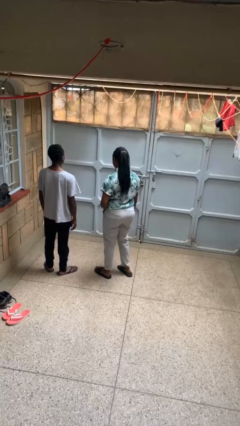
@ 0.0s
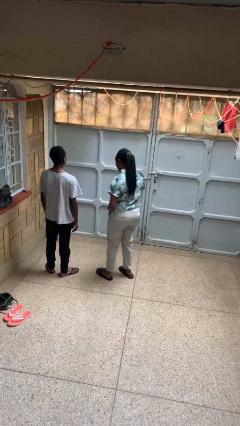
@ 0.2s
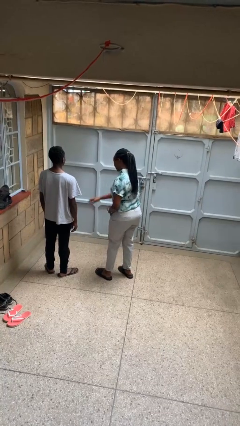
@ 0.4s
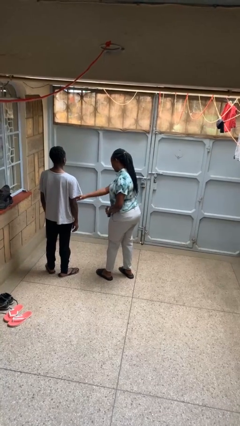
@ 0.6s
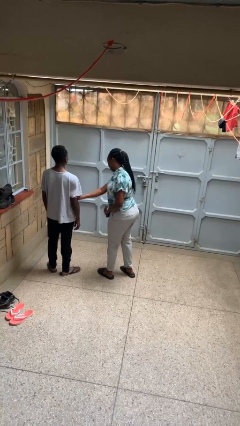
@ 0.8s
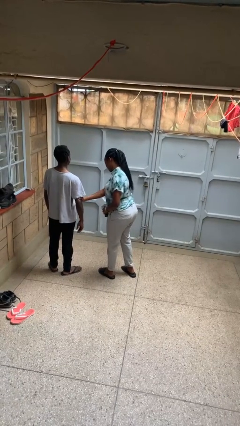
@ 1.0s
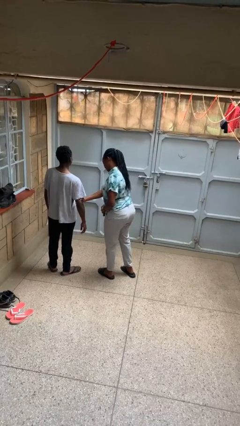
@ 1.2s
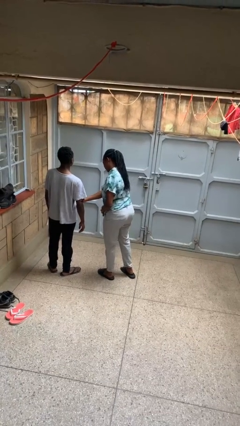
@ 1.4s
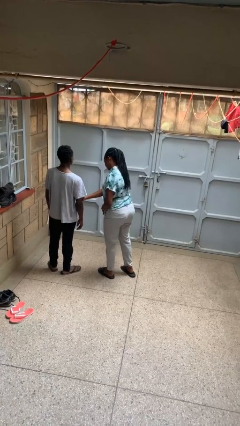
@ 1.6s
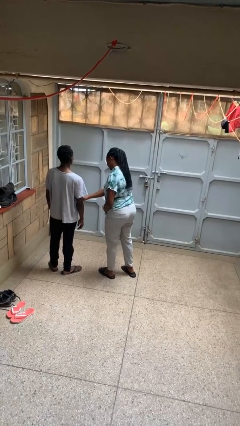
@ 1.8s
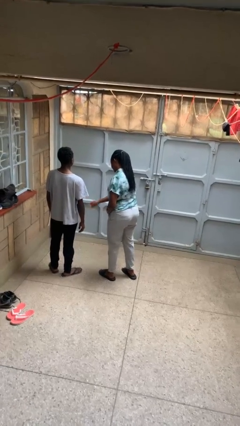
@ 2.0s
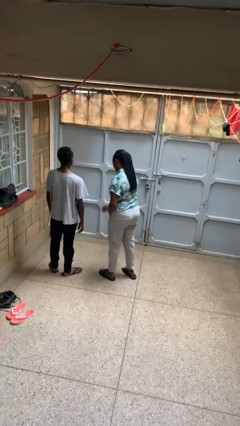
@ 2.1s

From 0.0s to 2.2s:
person grabs person by bicep

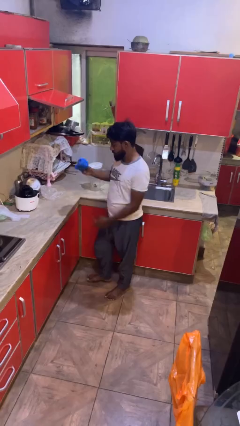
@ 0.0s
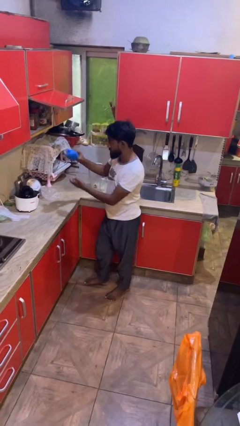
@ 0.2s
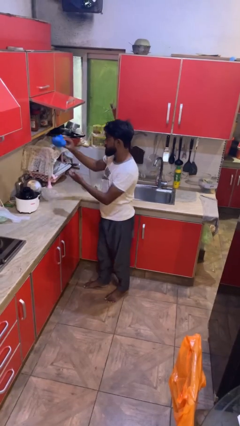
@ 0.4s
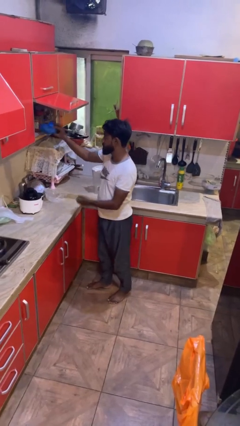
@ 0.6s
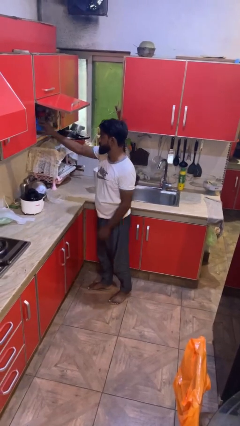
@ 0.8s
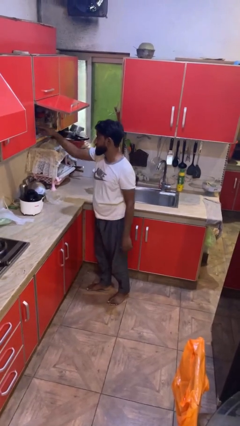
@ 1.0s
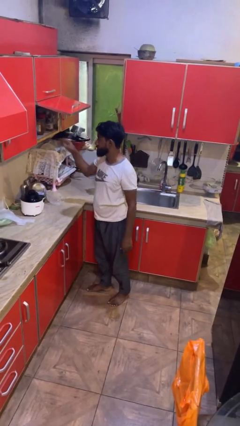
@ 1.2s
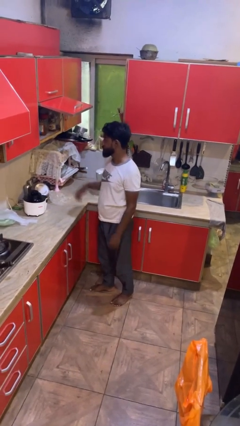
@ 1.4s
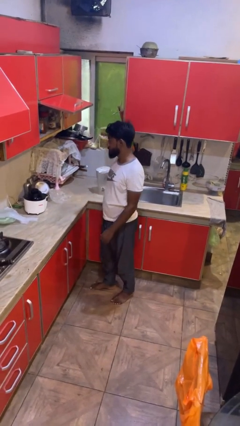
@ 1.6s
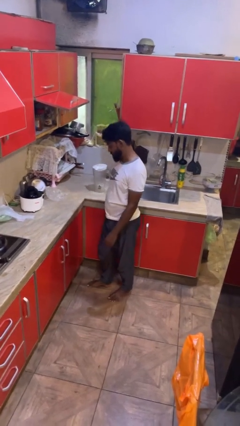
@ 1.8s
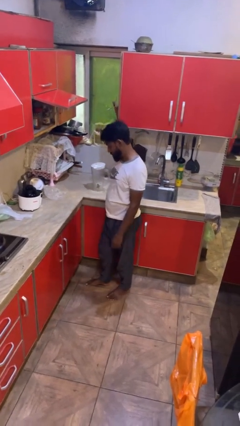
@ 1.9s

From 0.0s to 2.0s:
person puts down object into cabinet

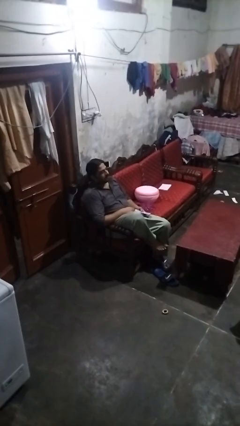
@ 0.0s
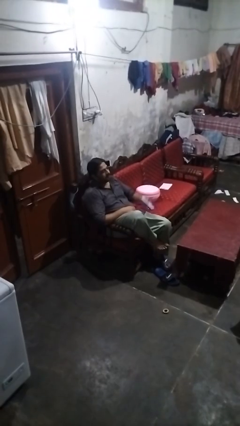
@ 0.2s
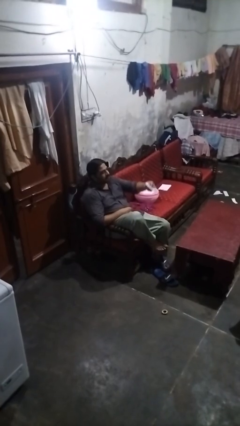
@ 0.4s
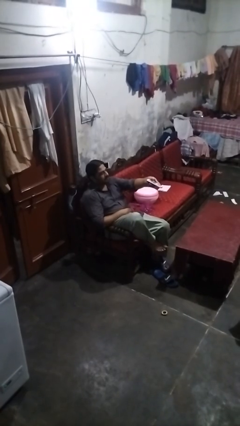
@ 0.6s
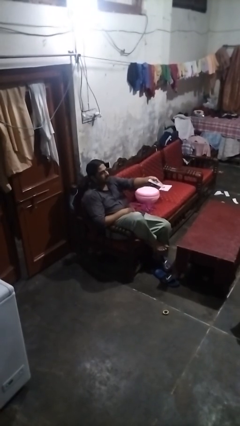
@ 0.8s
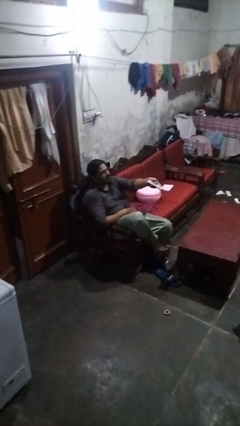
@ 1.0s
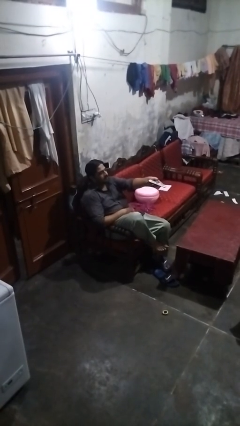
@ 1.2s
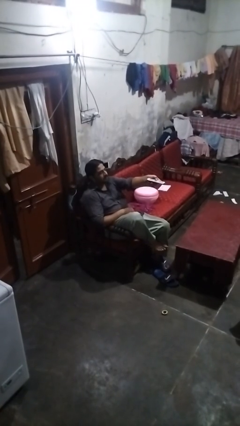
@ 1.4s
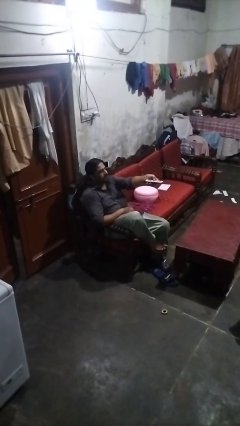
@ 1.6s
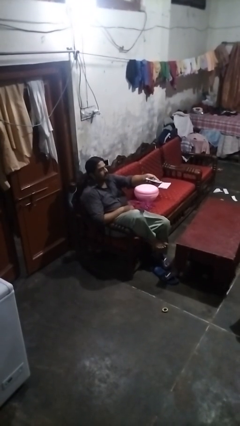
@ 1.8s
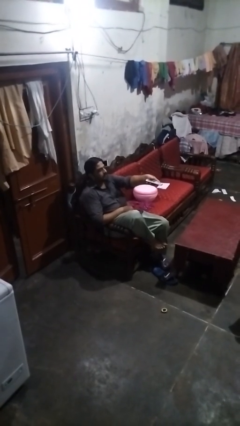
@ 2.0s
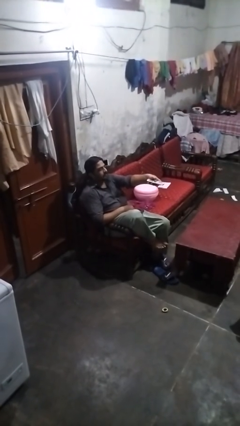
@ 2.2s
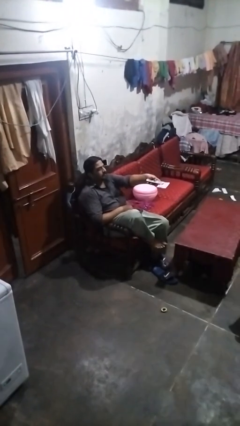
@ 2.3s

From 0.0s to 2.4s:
person uses television remote

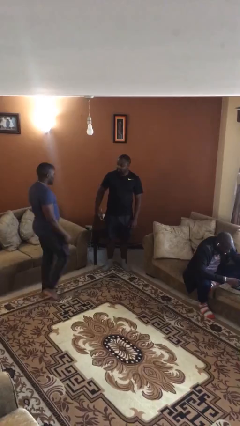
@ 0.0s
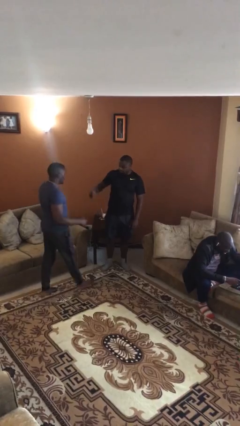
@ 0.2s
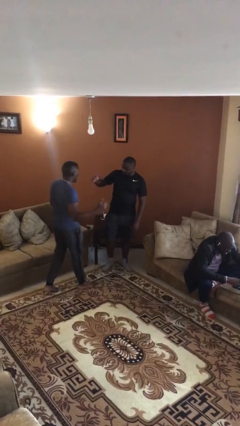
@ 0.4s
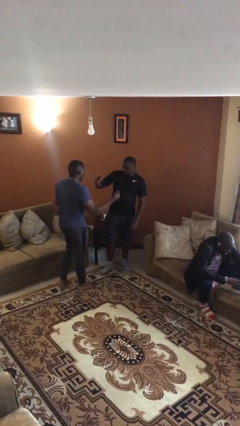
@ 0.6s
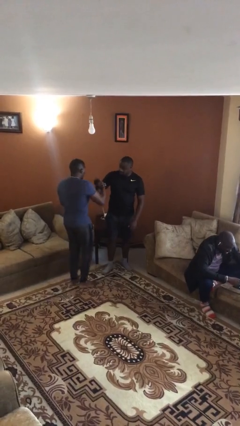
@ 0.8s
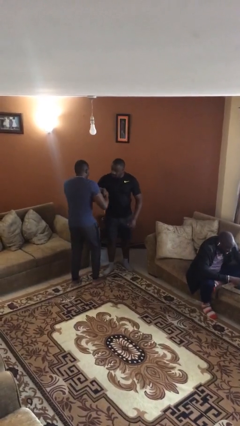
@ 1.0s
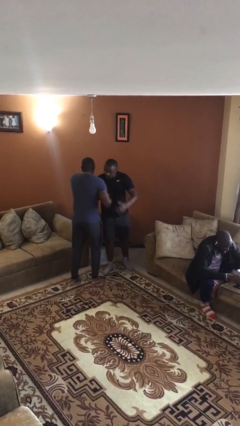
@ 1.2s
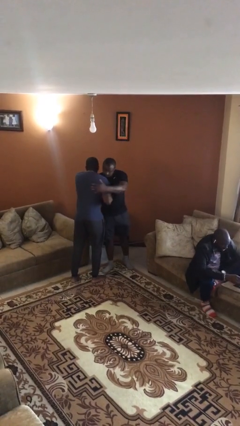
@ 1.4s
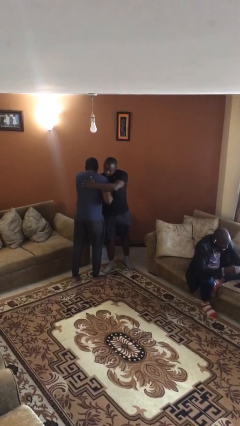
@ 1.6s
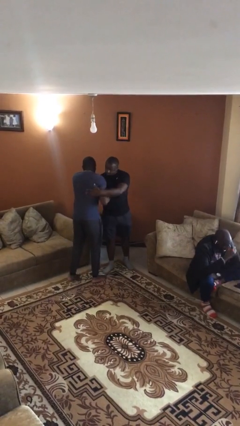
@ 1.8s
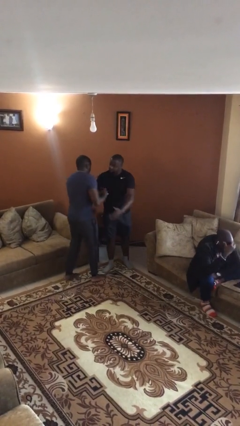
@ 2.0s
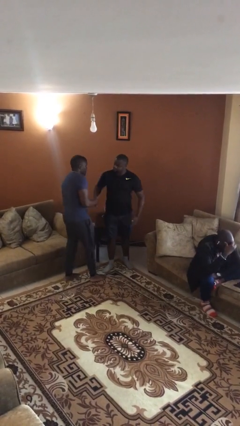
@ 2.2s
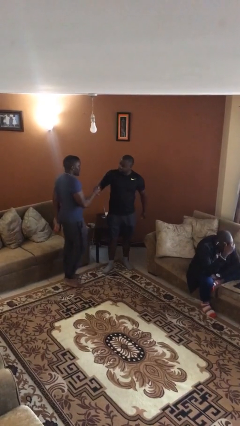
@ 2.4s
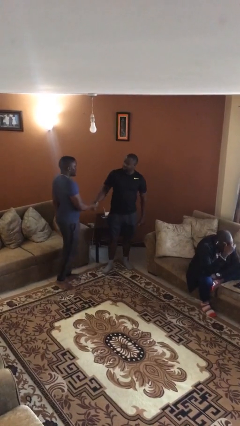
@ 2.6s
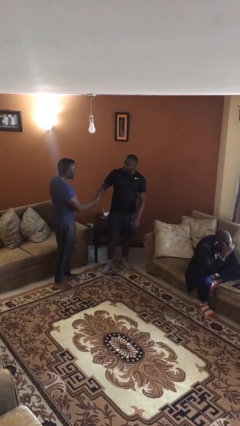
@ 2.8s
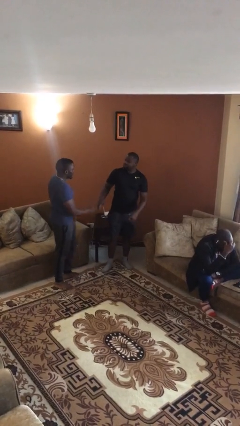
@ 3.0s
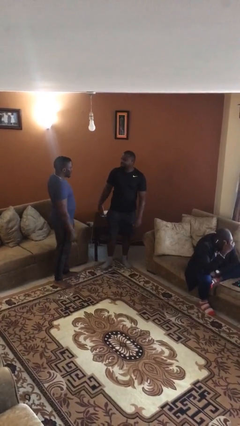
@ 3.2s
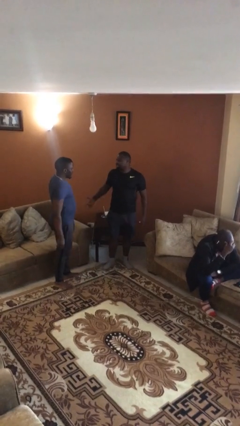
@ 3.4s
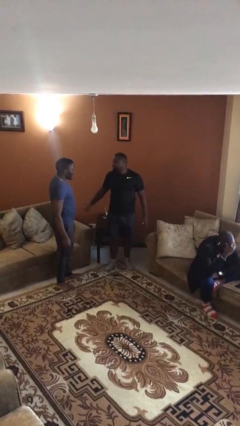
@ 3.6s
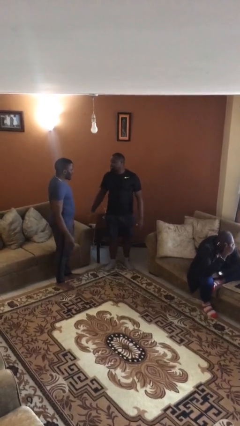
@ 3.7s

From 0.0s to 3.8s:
person embraces person

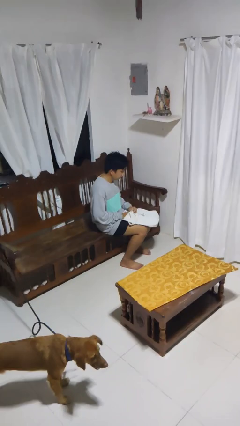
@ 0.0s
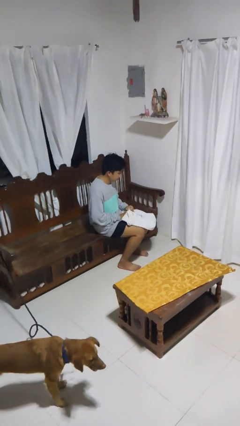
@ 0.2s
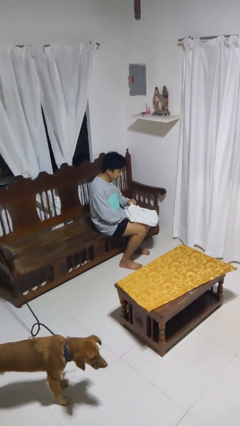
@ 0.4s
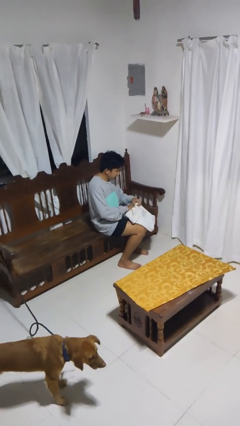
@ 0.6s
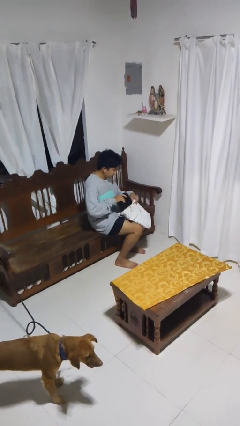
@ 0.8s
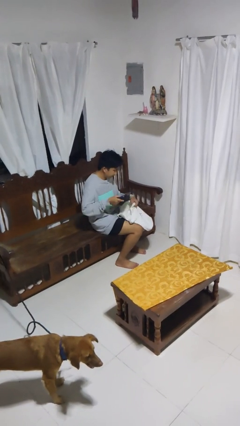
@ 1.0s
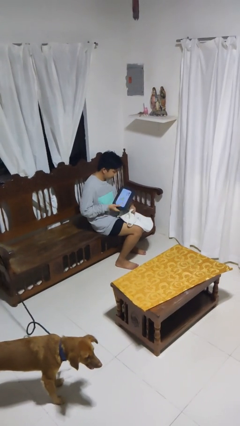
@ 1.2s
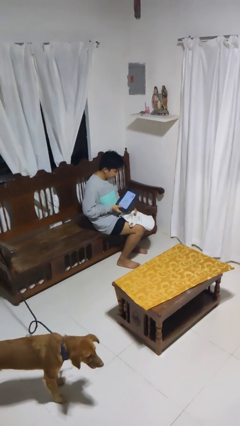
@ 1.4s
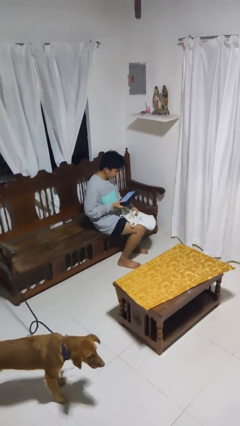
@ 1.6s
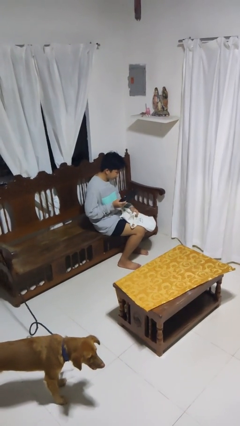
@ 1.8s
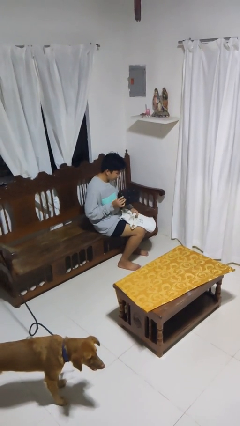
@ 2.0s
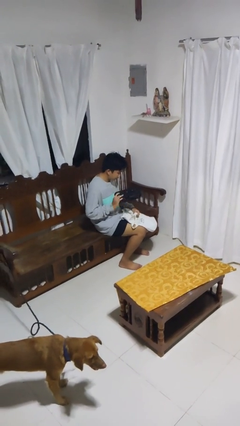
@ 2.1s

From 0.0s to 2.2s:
person takes object from bag

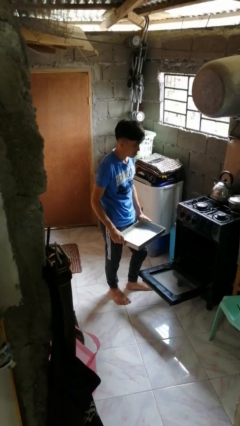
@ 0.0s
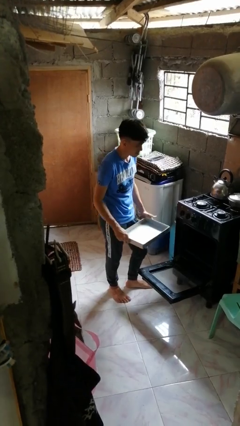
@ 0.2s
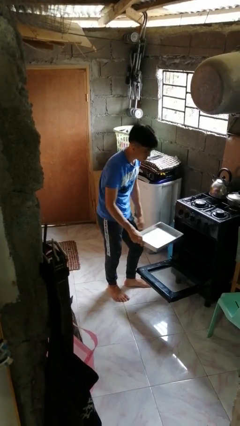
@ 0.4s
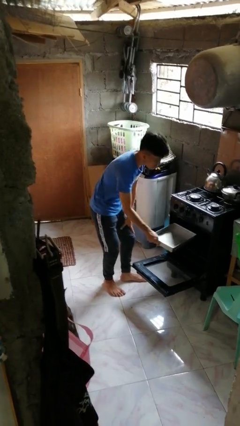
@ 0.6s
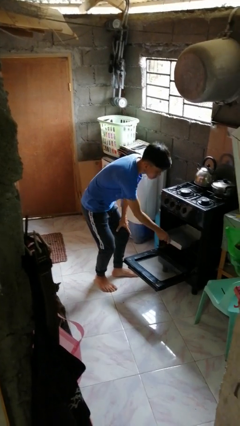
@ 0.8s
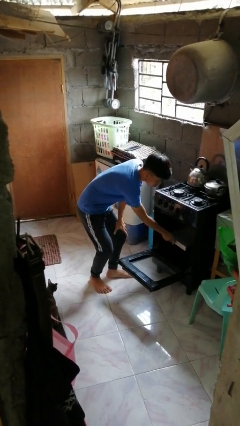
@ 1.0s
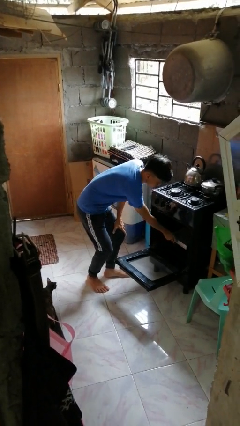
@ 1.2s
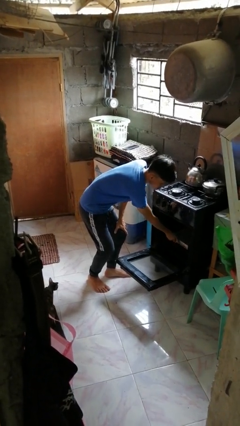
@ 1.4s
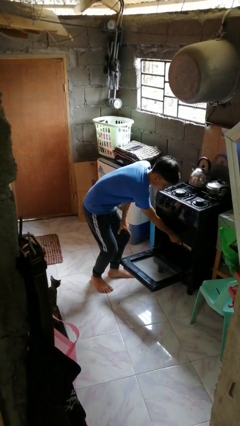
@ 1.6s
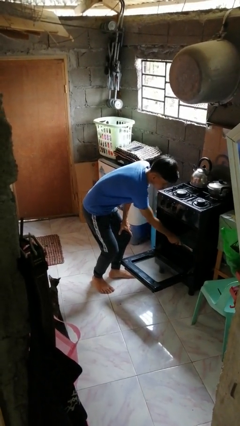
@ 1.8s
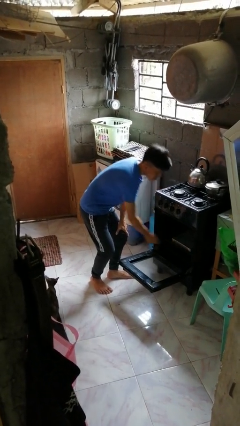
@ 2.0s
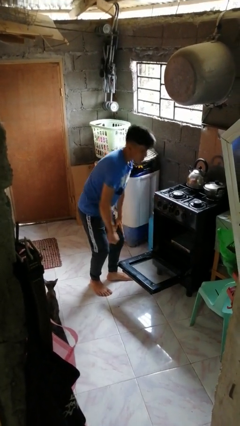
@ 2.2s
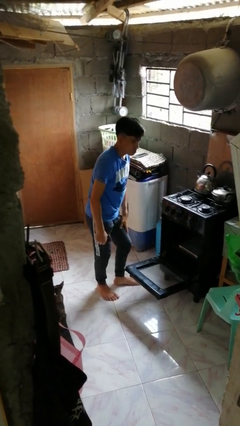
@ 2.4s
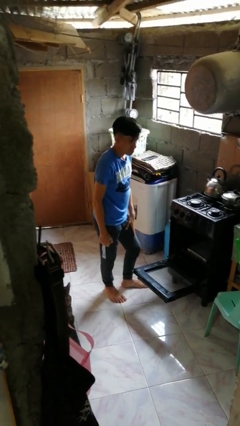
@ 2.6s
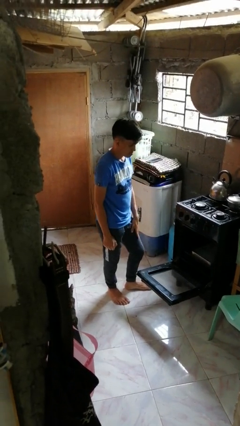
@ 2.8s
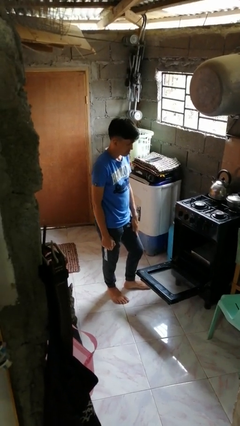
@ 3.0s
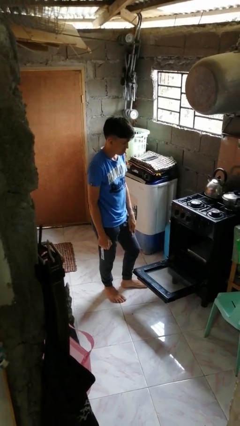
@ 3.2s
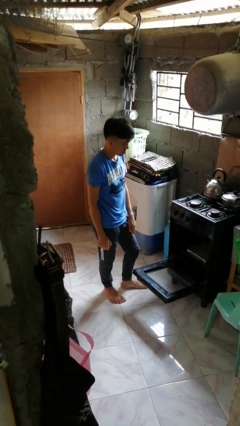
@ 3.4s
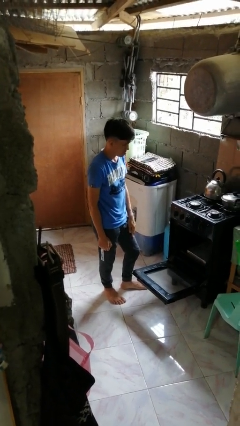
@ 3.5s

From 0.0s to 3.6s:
person puts object into oven

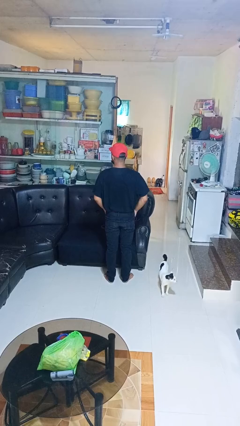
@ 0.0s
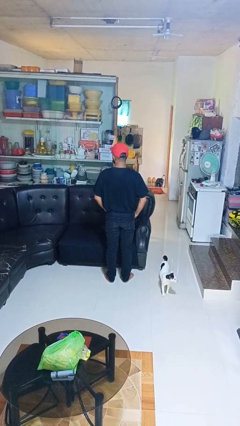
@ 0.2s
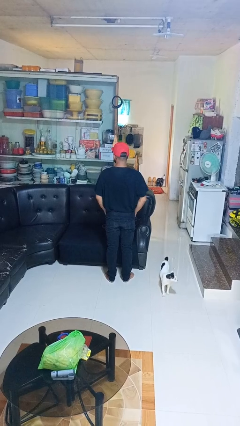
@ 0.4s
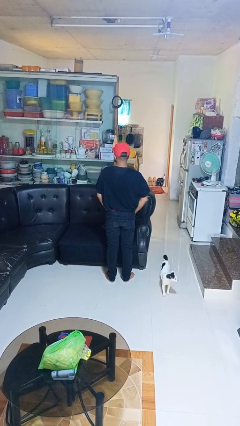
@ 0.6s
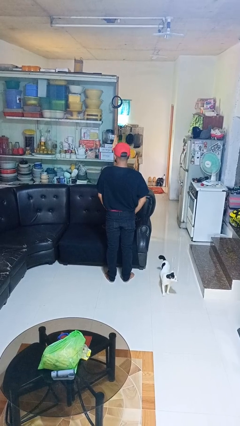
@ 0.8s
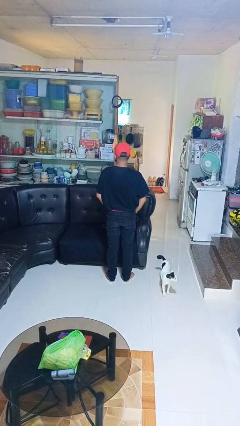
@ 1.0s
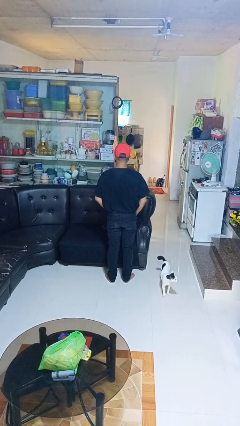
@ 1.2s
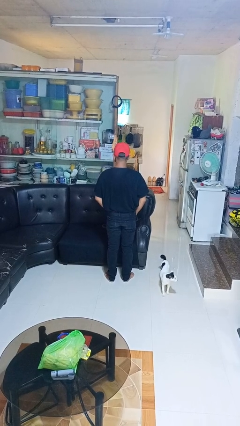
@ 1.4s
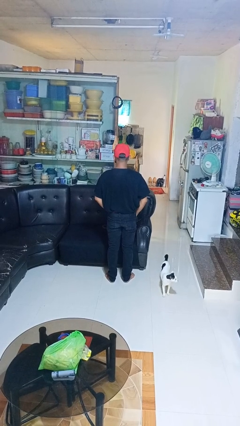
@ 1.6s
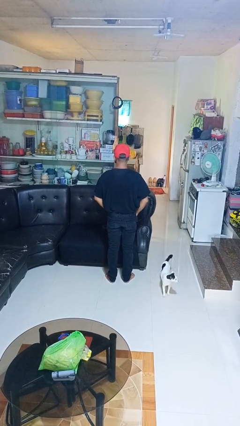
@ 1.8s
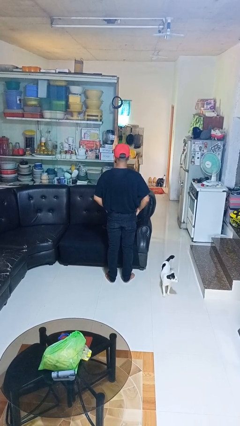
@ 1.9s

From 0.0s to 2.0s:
person puts hands in back pockets
